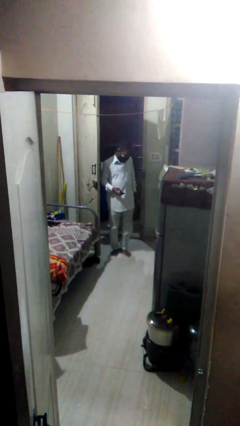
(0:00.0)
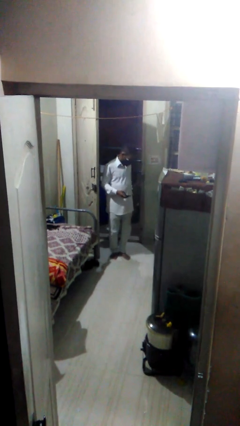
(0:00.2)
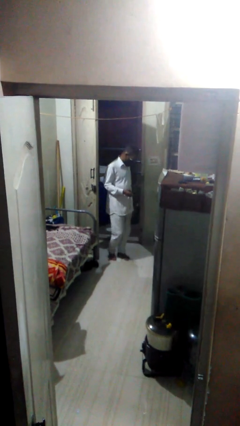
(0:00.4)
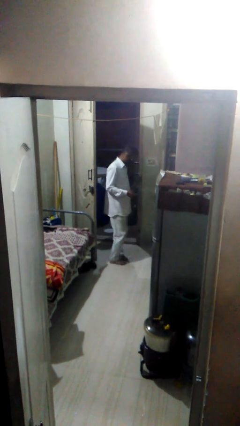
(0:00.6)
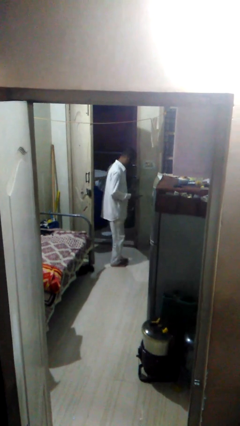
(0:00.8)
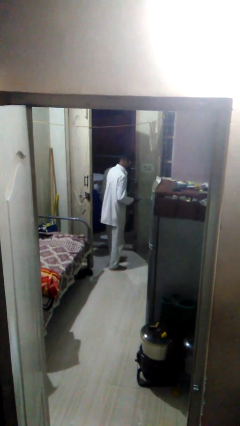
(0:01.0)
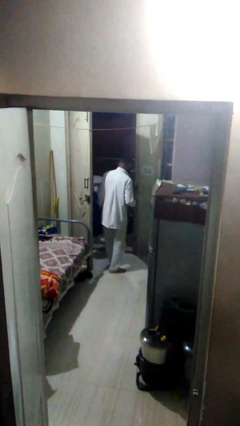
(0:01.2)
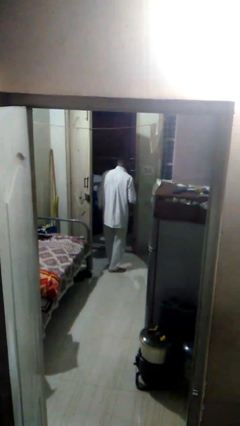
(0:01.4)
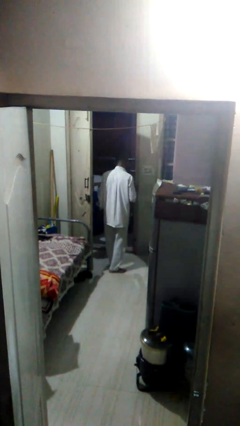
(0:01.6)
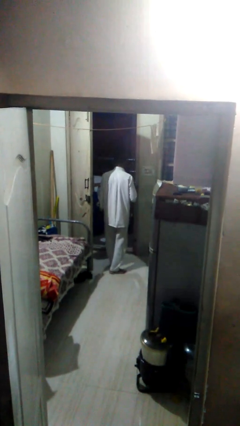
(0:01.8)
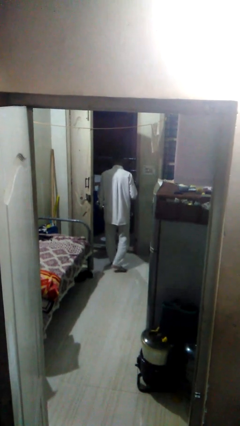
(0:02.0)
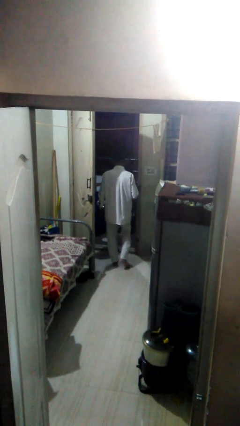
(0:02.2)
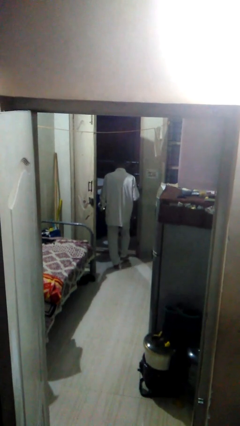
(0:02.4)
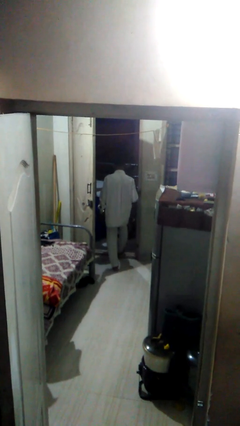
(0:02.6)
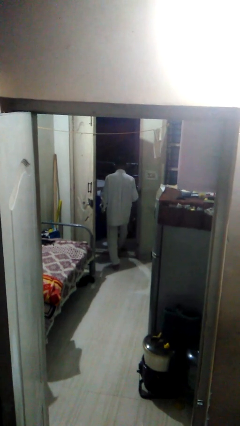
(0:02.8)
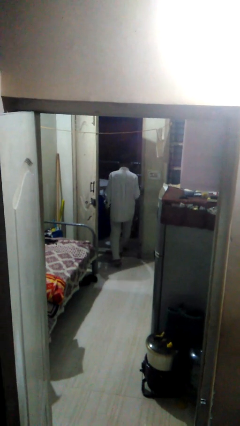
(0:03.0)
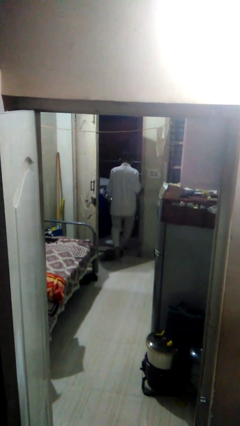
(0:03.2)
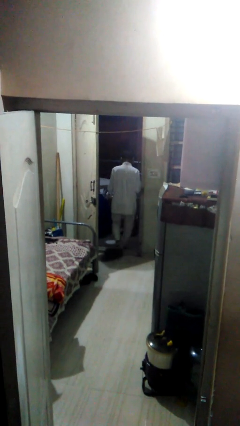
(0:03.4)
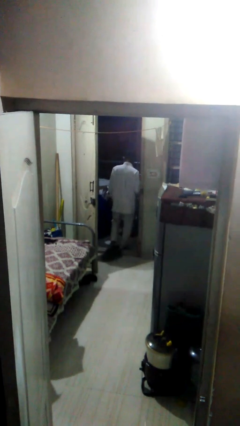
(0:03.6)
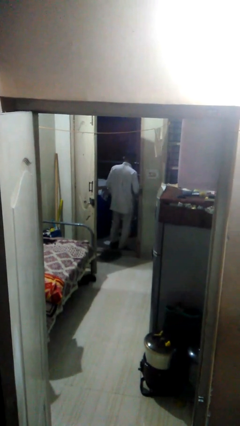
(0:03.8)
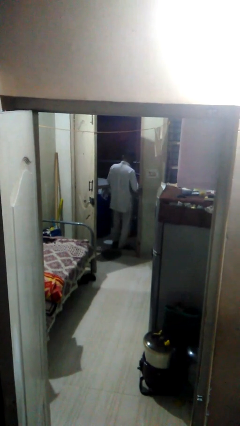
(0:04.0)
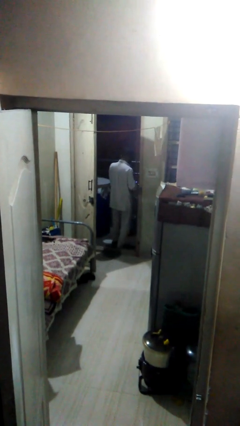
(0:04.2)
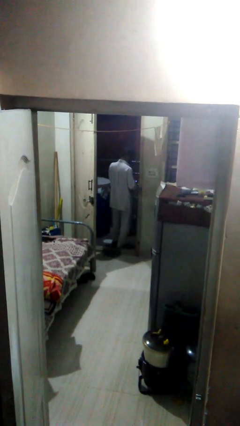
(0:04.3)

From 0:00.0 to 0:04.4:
person exits scene through structure

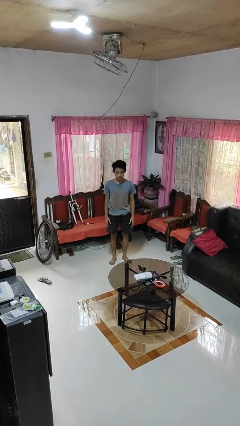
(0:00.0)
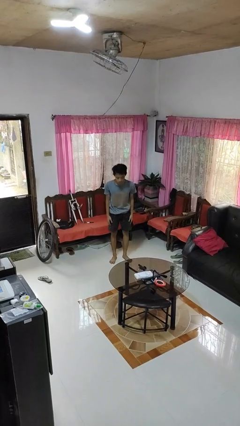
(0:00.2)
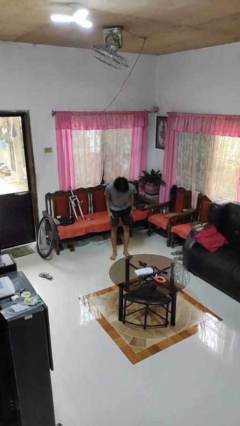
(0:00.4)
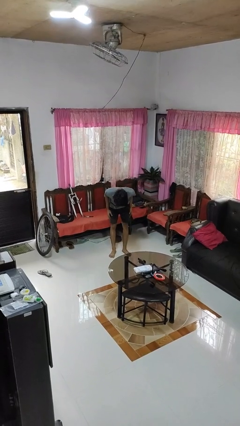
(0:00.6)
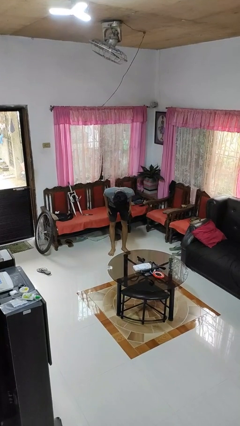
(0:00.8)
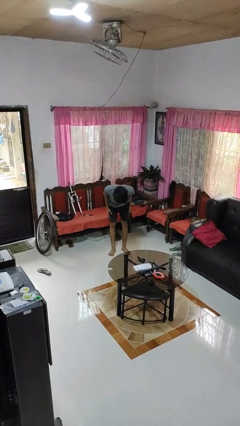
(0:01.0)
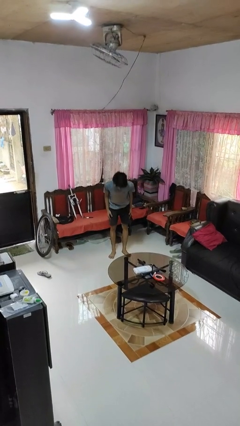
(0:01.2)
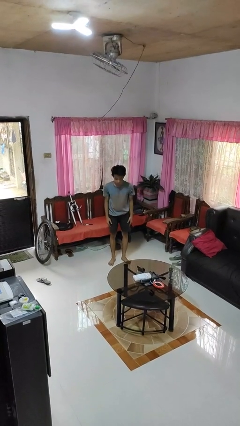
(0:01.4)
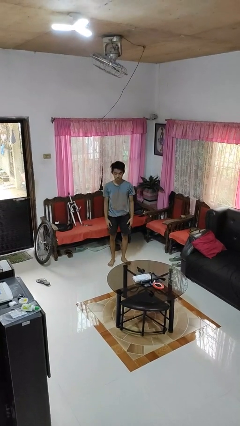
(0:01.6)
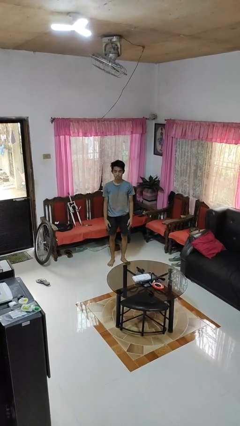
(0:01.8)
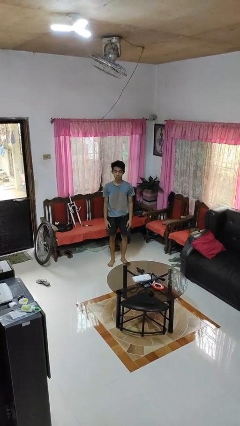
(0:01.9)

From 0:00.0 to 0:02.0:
person bows

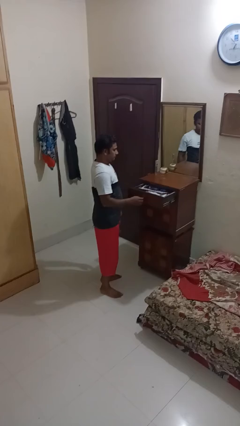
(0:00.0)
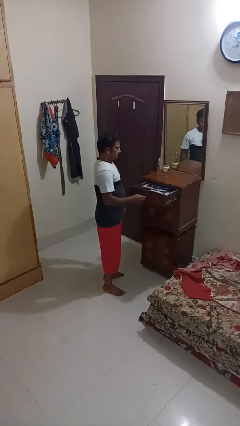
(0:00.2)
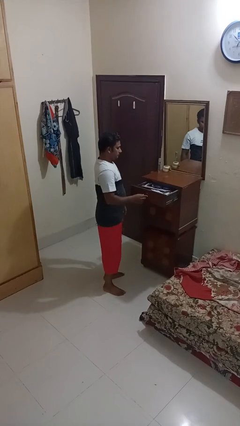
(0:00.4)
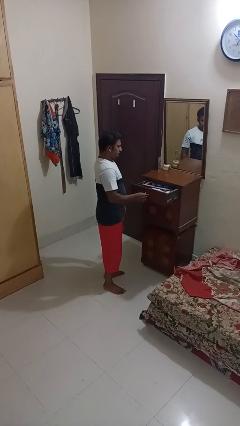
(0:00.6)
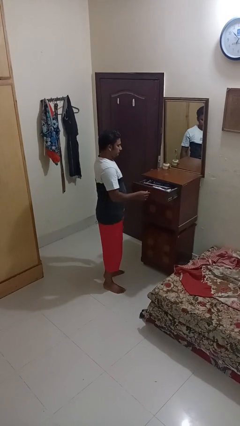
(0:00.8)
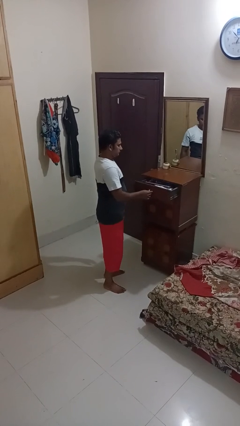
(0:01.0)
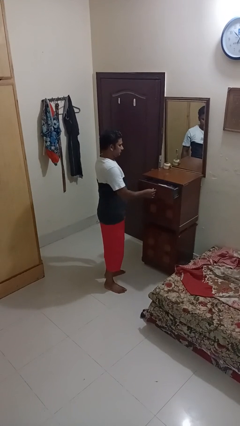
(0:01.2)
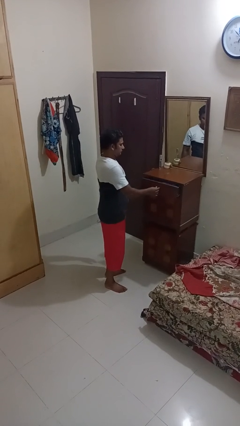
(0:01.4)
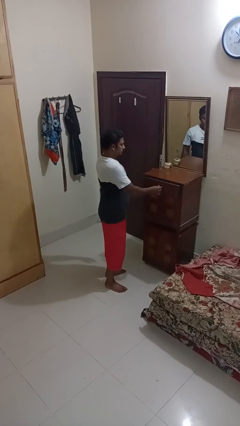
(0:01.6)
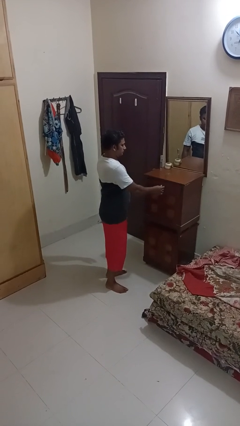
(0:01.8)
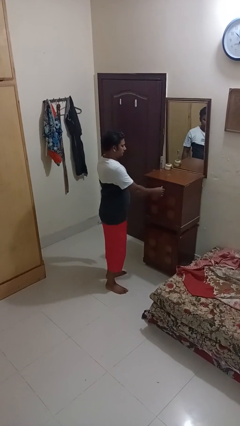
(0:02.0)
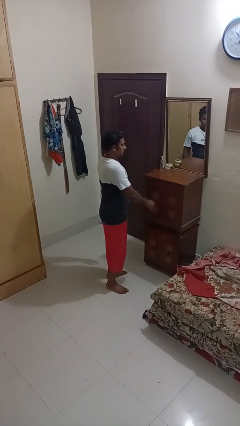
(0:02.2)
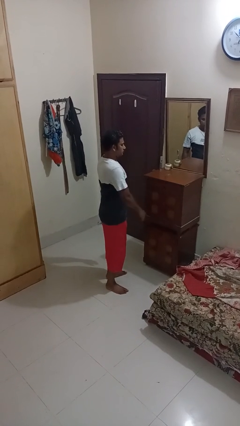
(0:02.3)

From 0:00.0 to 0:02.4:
person closes dresser drawer

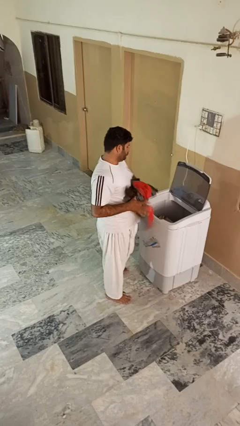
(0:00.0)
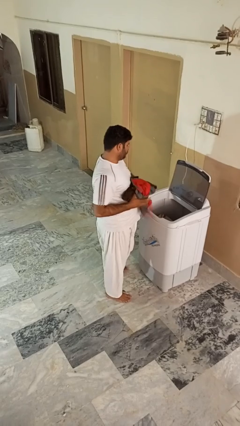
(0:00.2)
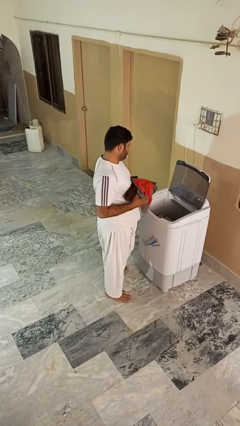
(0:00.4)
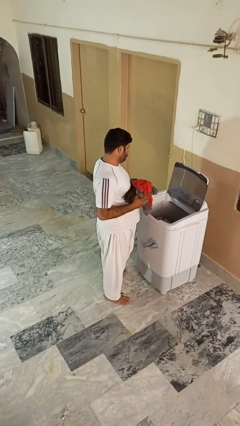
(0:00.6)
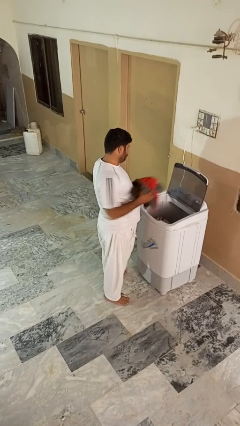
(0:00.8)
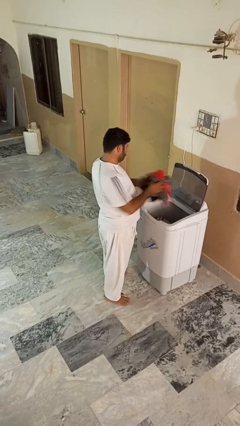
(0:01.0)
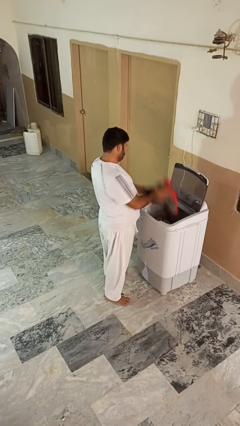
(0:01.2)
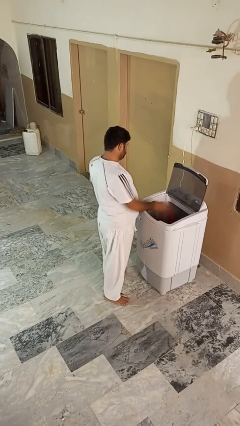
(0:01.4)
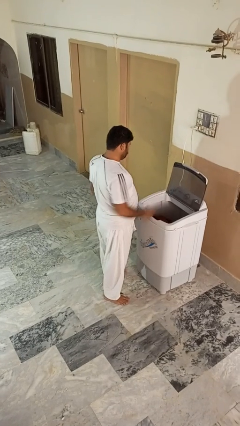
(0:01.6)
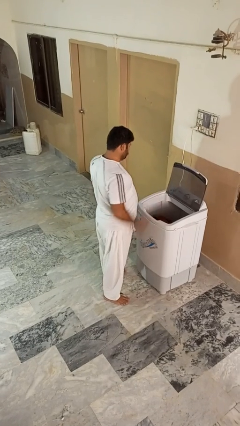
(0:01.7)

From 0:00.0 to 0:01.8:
person loads clotheswasher

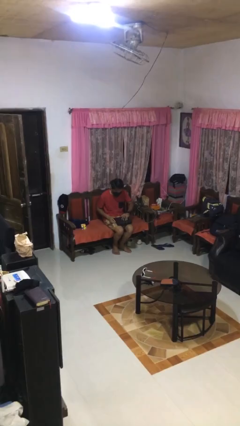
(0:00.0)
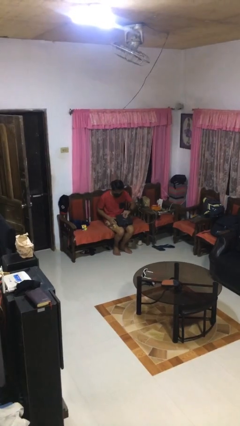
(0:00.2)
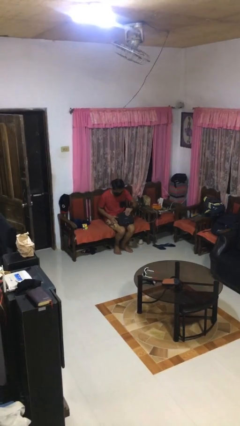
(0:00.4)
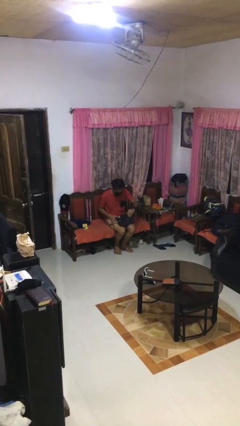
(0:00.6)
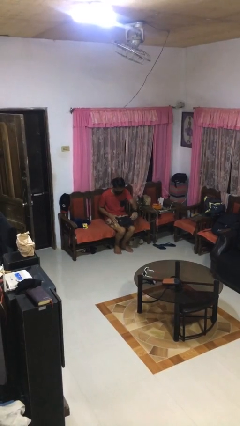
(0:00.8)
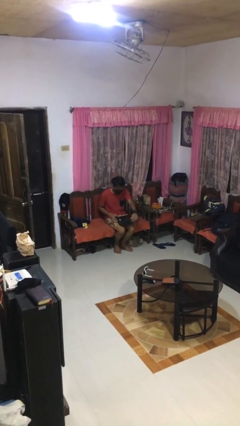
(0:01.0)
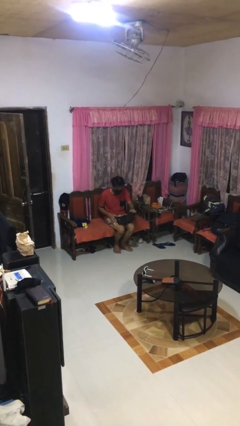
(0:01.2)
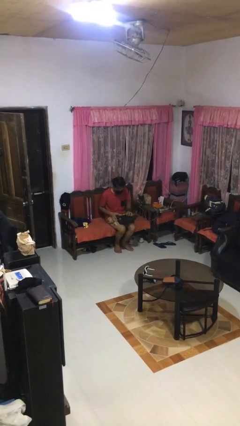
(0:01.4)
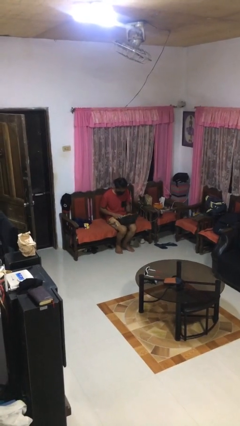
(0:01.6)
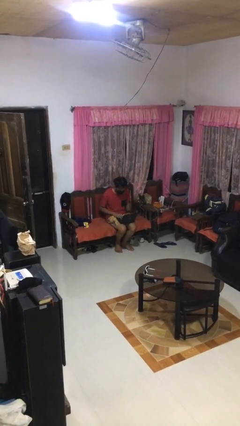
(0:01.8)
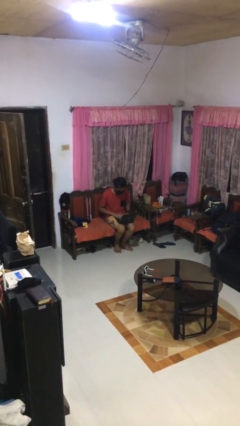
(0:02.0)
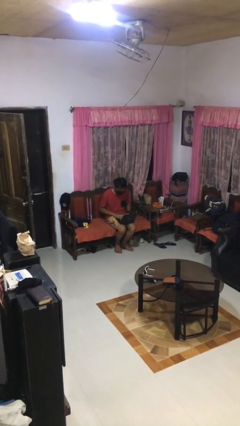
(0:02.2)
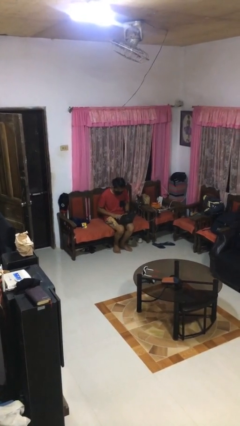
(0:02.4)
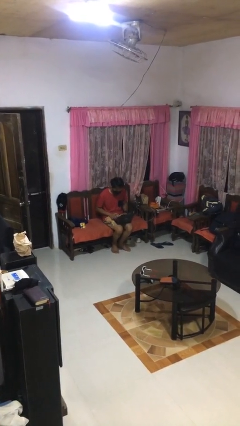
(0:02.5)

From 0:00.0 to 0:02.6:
person opens laptop

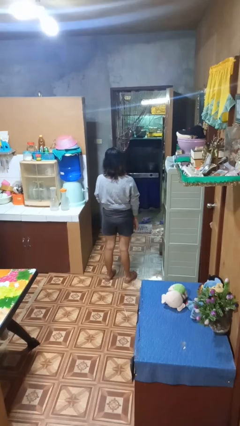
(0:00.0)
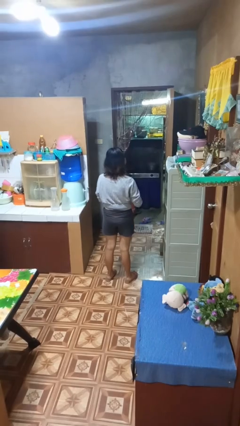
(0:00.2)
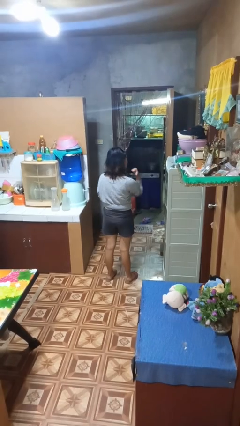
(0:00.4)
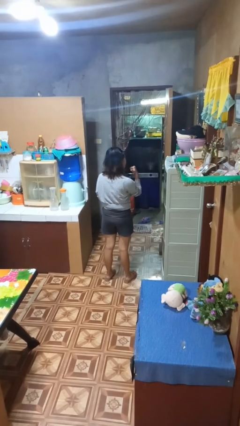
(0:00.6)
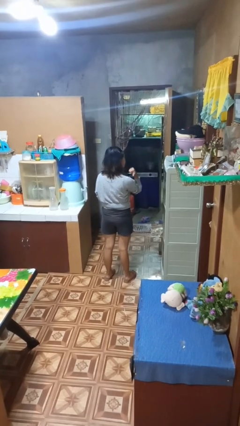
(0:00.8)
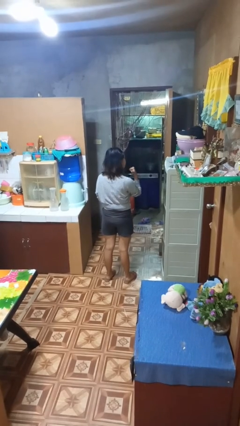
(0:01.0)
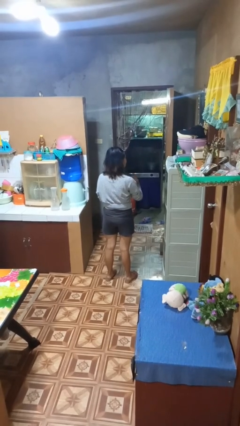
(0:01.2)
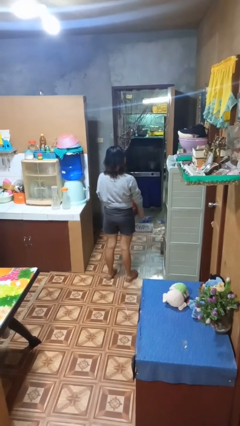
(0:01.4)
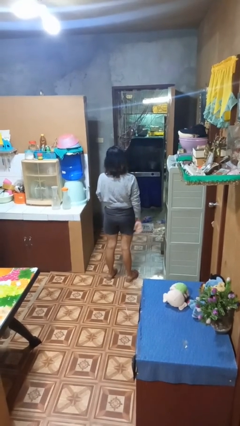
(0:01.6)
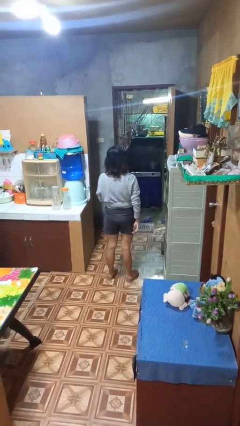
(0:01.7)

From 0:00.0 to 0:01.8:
person gestures behind me

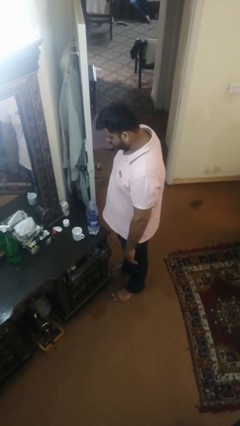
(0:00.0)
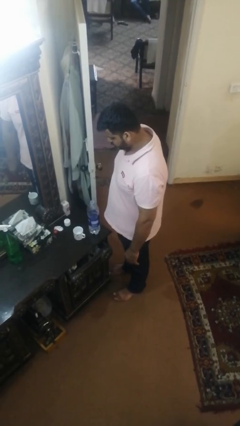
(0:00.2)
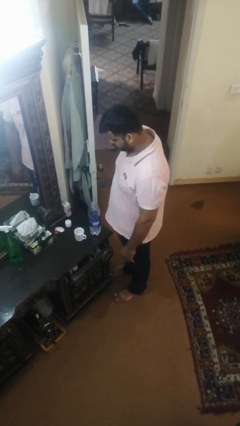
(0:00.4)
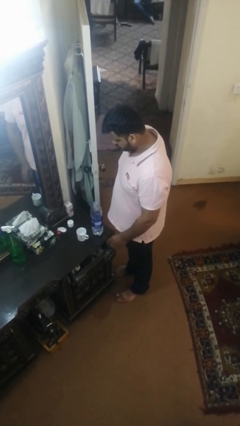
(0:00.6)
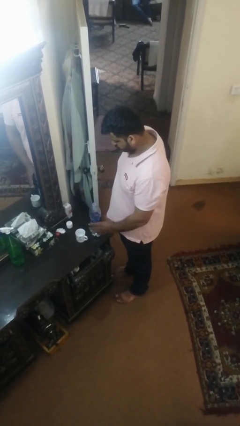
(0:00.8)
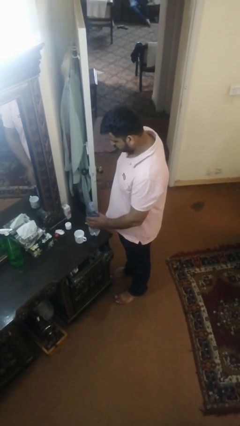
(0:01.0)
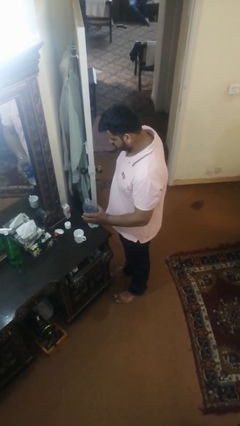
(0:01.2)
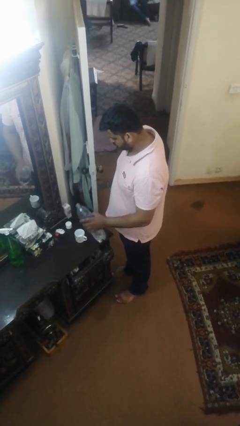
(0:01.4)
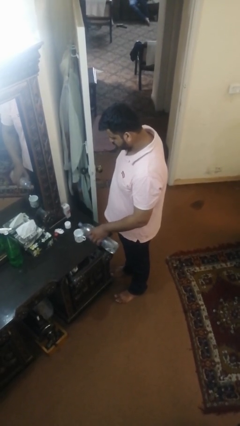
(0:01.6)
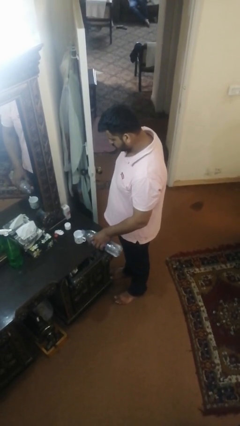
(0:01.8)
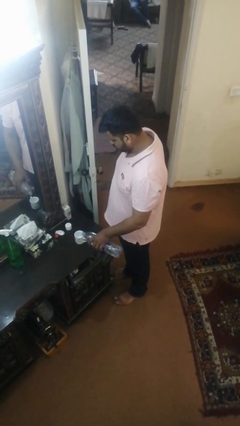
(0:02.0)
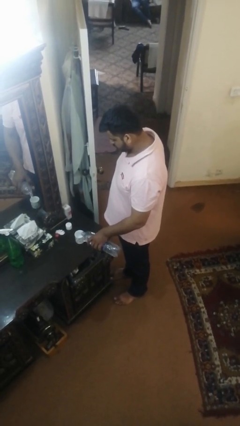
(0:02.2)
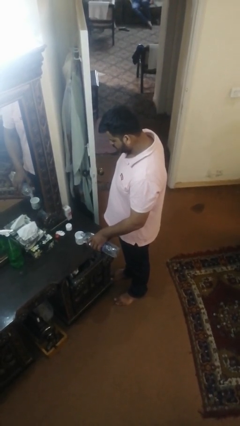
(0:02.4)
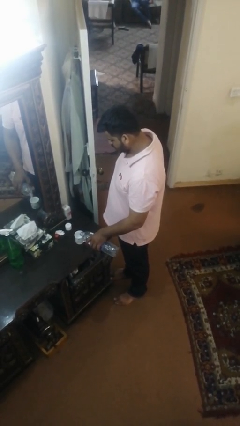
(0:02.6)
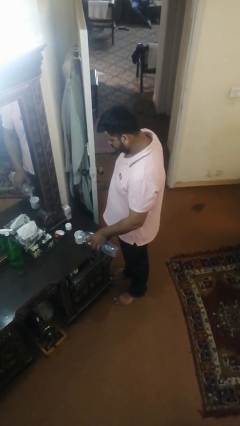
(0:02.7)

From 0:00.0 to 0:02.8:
person pours liquid into cup
